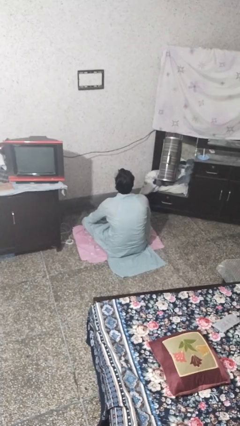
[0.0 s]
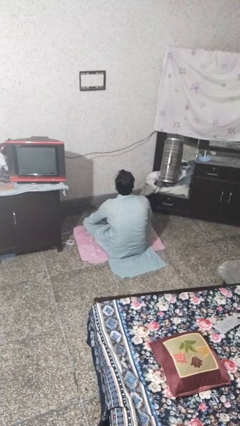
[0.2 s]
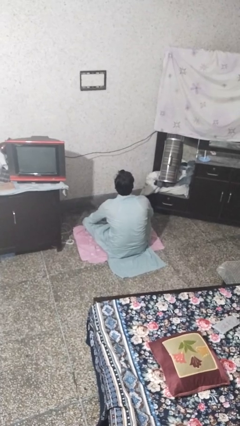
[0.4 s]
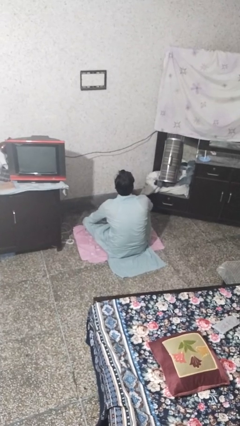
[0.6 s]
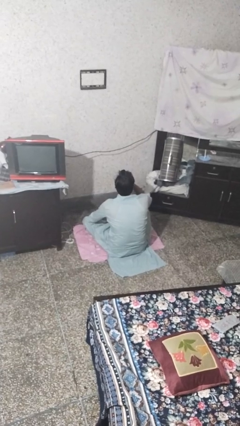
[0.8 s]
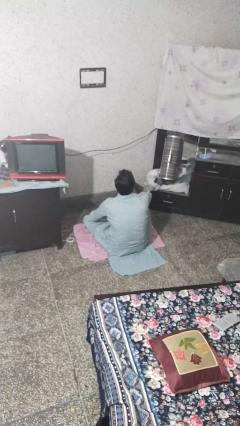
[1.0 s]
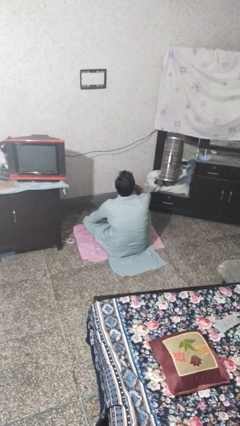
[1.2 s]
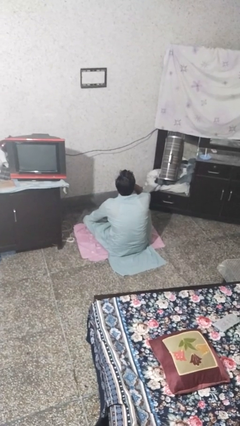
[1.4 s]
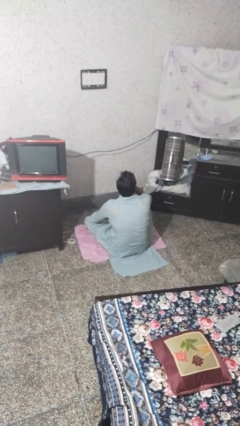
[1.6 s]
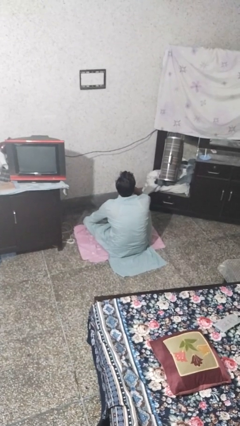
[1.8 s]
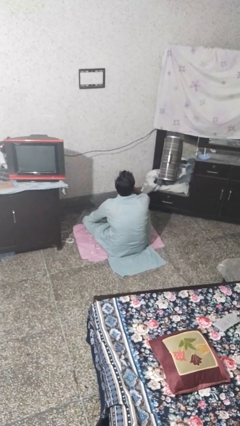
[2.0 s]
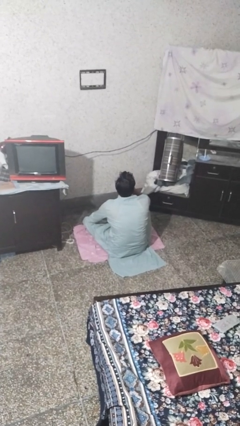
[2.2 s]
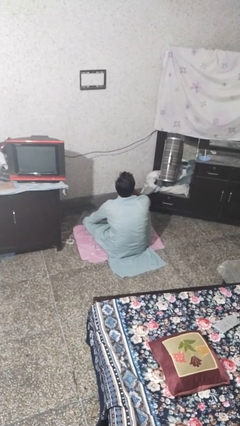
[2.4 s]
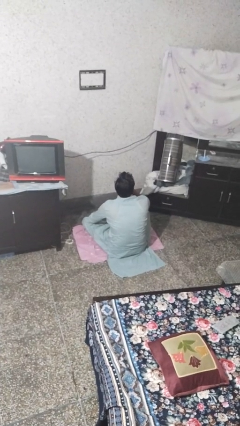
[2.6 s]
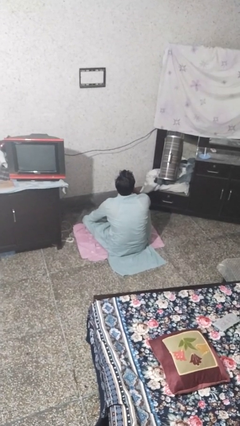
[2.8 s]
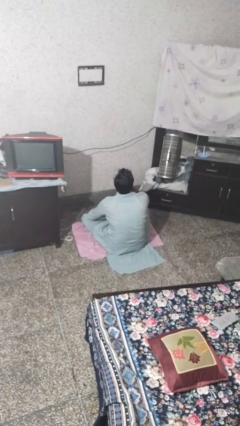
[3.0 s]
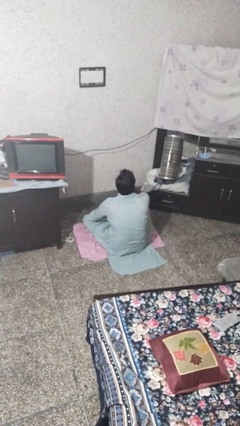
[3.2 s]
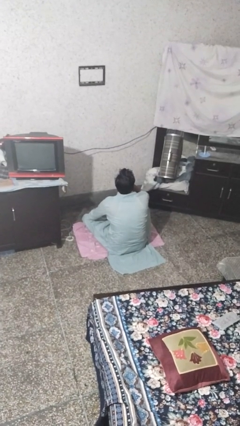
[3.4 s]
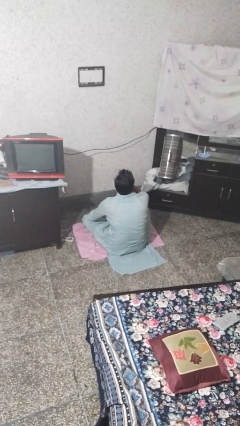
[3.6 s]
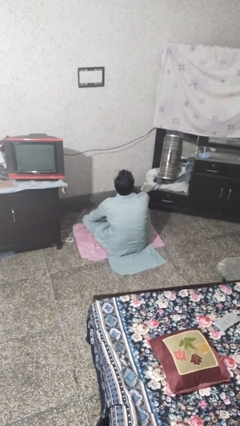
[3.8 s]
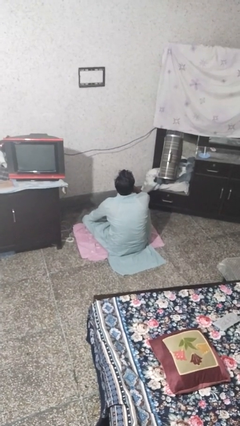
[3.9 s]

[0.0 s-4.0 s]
person licks fingers

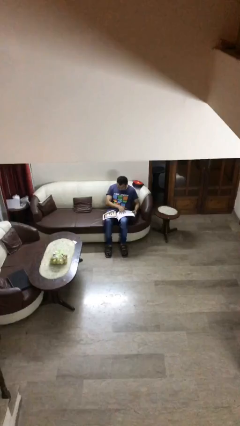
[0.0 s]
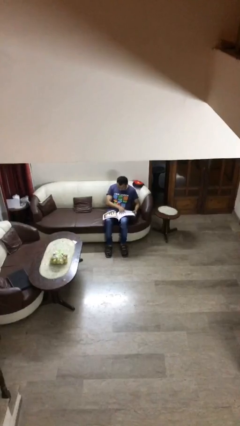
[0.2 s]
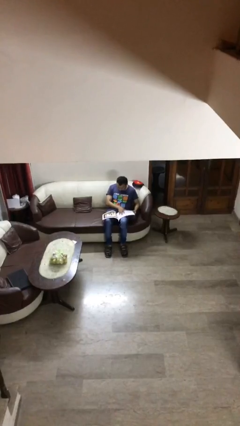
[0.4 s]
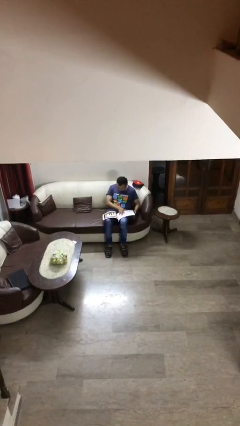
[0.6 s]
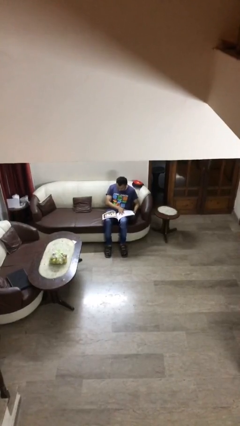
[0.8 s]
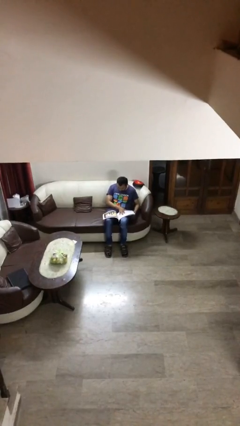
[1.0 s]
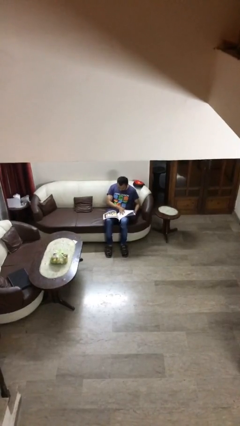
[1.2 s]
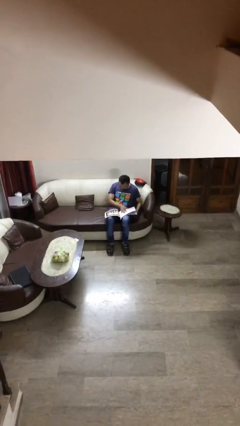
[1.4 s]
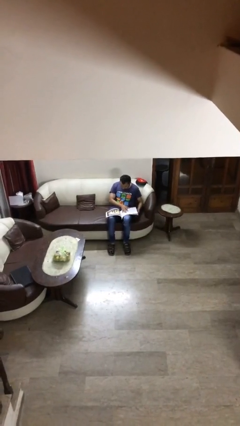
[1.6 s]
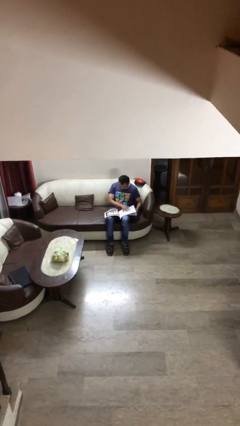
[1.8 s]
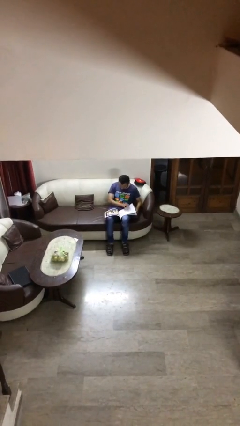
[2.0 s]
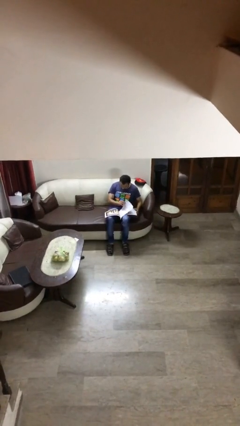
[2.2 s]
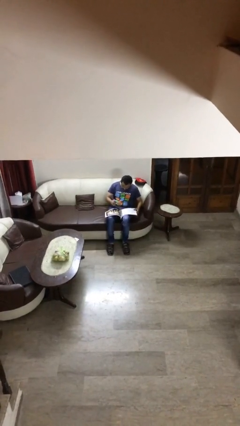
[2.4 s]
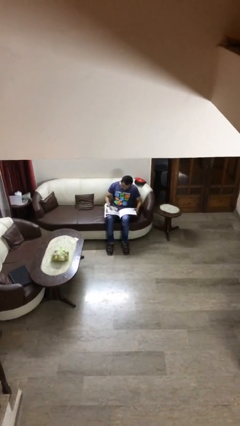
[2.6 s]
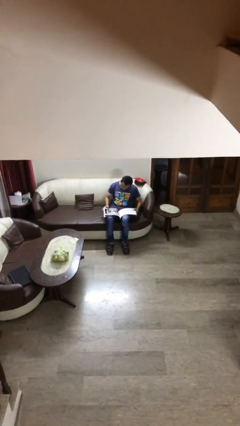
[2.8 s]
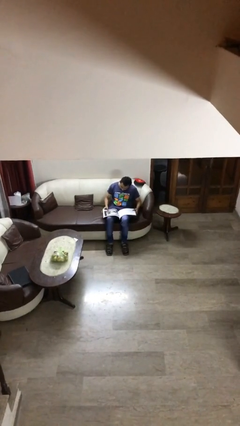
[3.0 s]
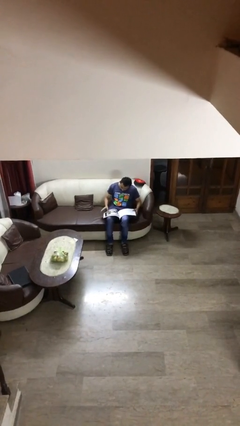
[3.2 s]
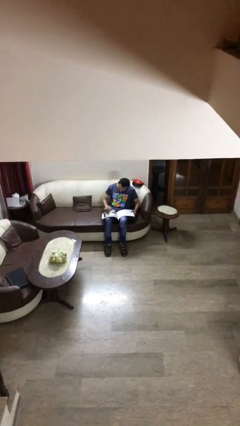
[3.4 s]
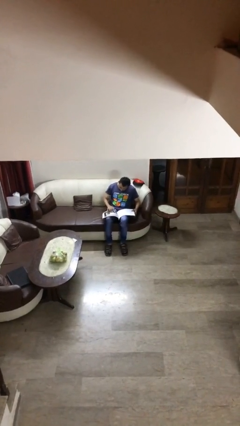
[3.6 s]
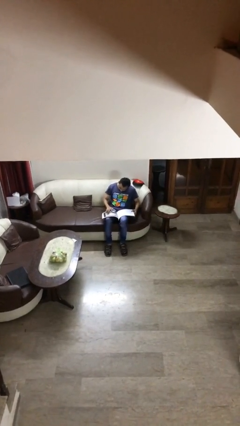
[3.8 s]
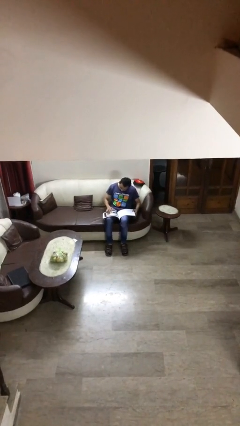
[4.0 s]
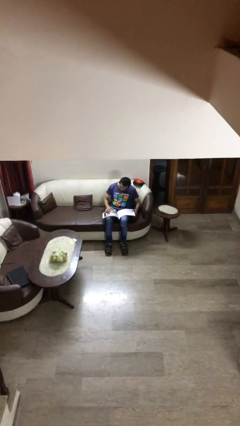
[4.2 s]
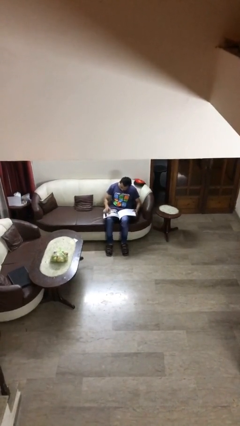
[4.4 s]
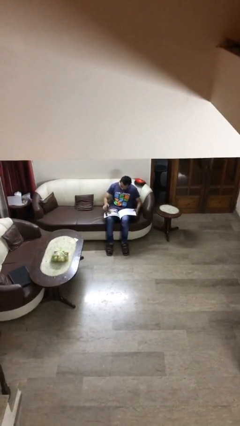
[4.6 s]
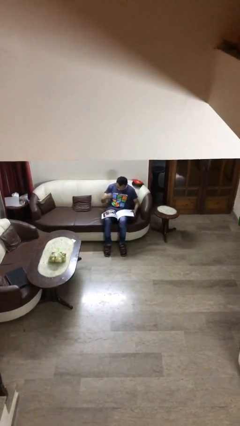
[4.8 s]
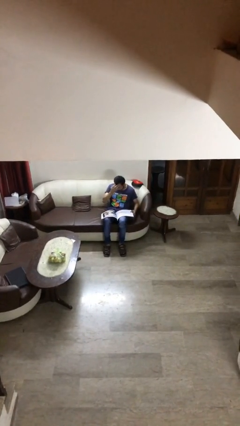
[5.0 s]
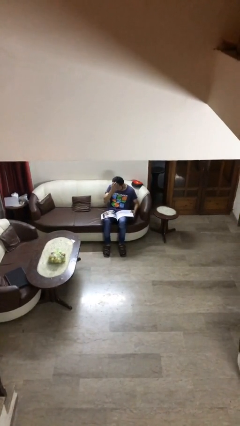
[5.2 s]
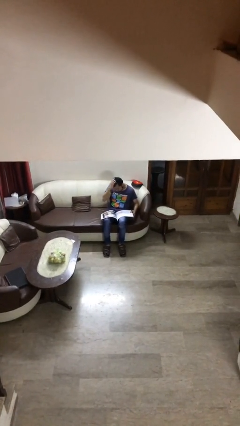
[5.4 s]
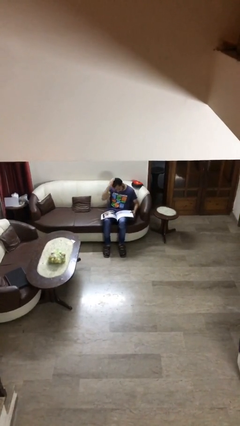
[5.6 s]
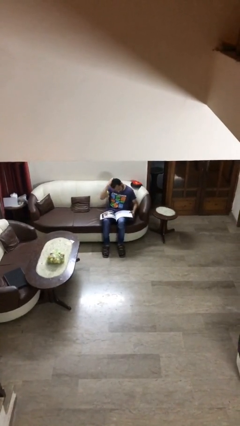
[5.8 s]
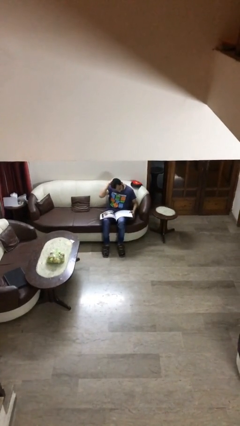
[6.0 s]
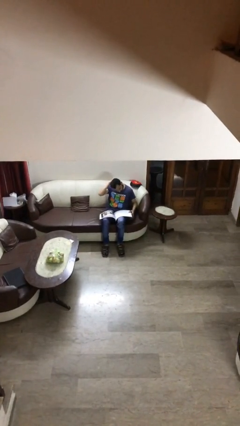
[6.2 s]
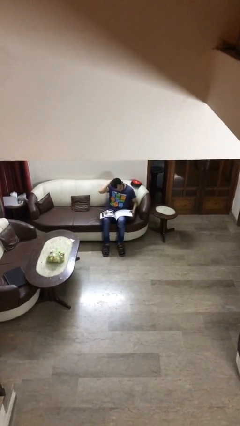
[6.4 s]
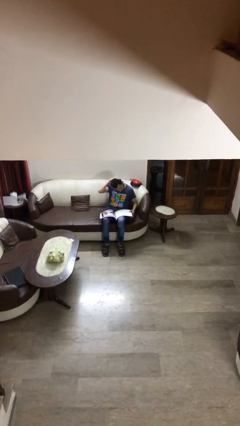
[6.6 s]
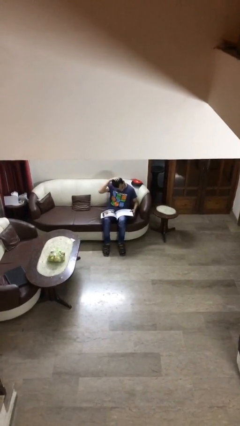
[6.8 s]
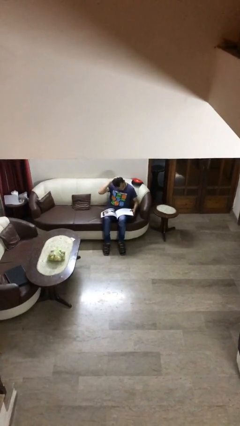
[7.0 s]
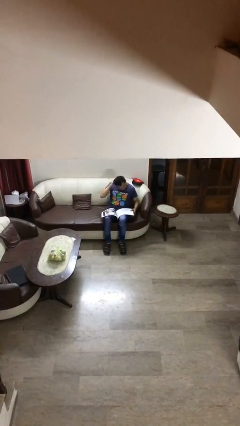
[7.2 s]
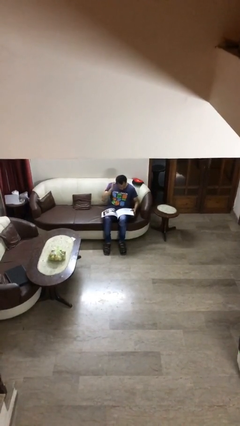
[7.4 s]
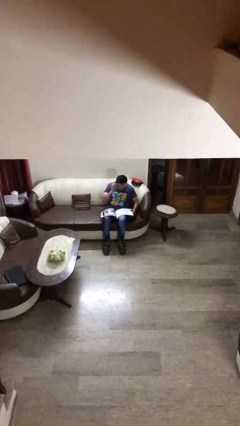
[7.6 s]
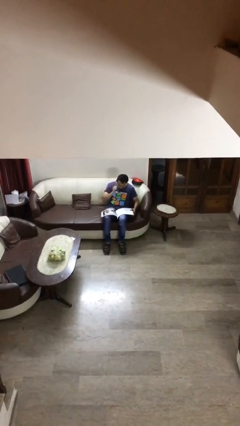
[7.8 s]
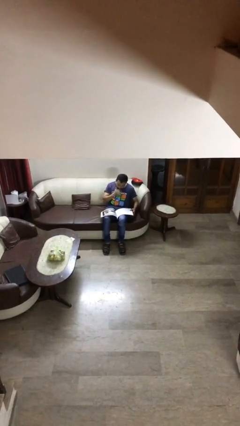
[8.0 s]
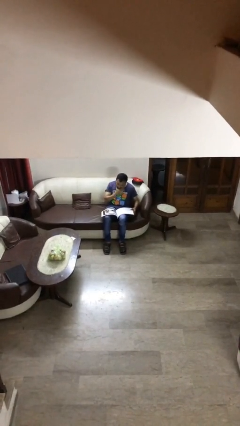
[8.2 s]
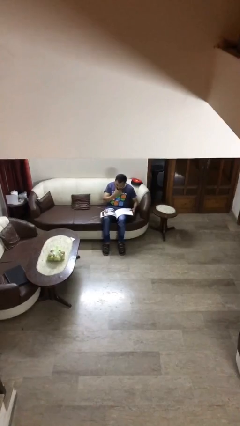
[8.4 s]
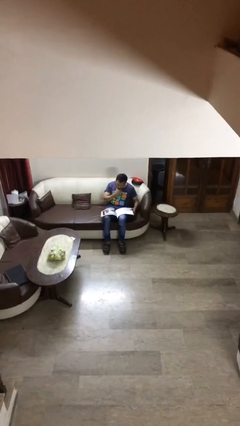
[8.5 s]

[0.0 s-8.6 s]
person reads document

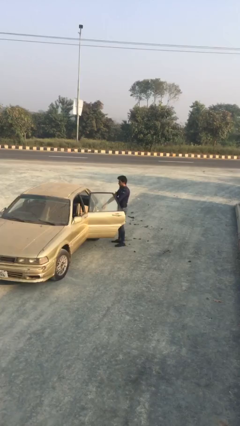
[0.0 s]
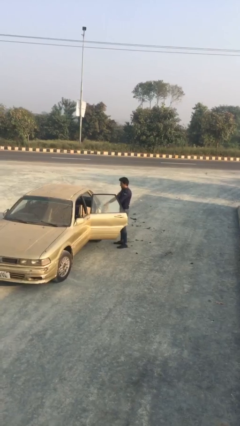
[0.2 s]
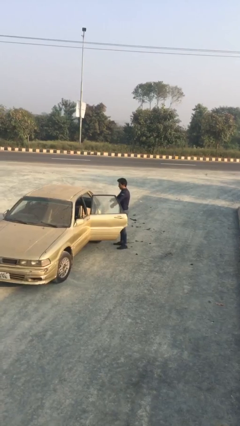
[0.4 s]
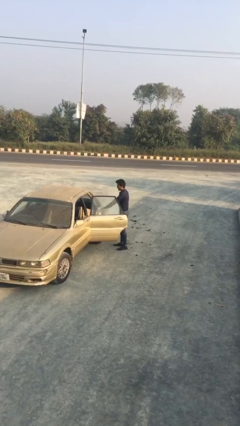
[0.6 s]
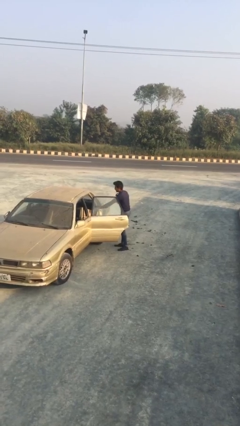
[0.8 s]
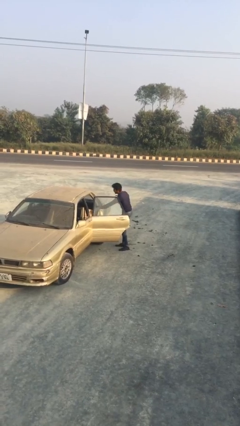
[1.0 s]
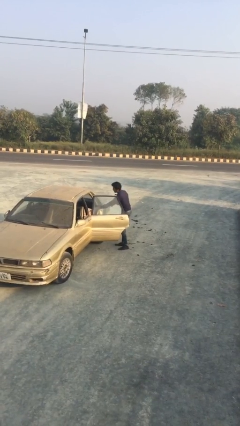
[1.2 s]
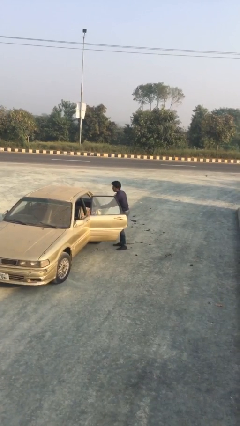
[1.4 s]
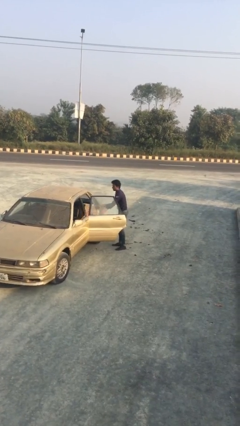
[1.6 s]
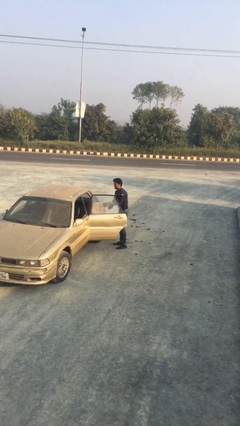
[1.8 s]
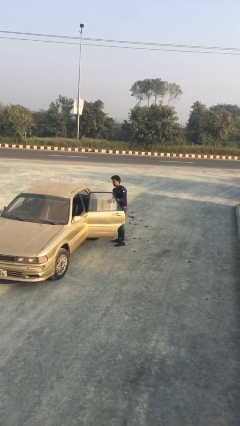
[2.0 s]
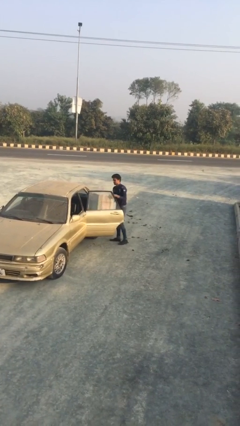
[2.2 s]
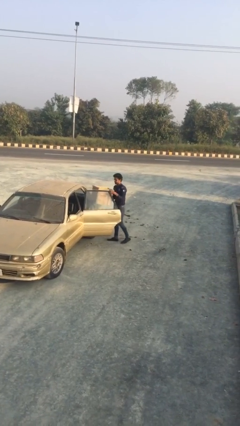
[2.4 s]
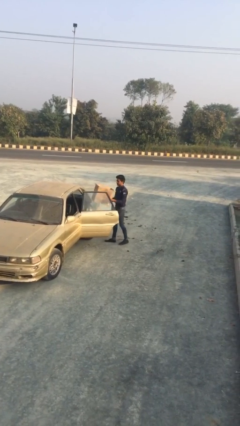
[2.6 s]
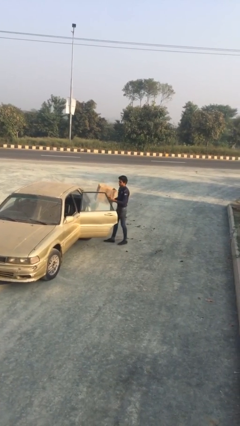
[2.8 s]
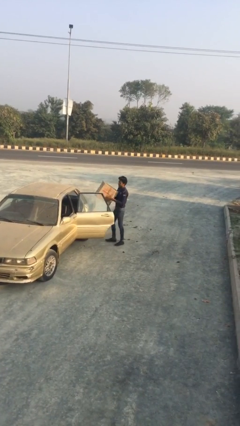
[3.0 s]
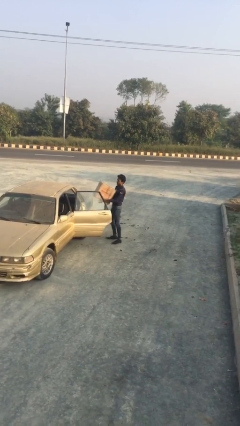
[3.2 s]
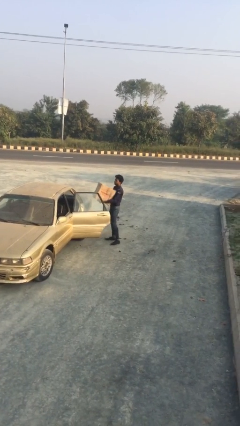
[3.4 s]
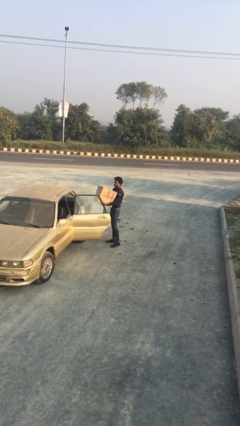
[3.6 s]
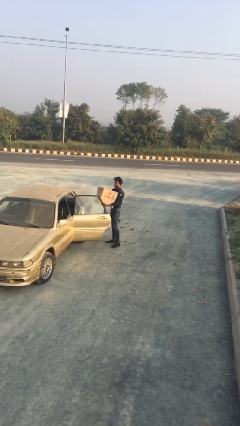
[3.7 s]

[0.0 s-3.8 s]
person unloads car

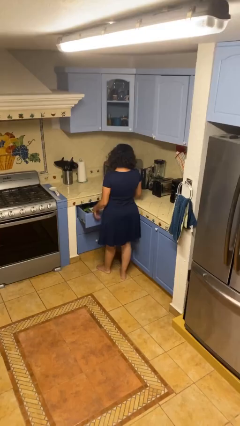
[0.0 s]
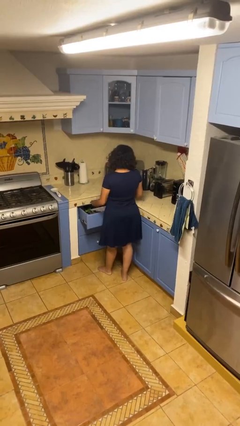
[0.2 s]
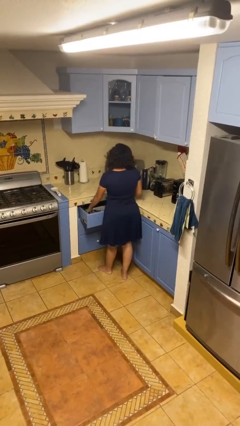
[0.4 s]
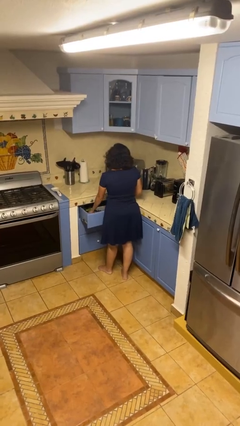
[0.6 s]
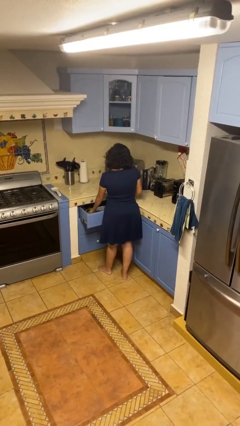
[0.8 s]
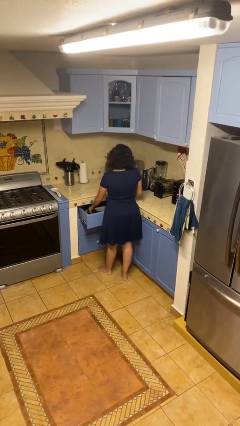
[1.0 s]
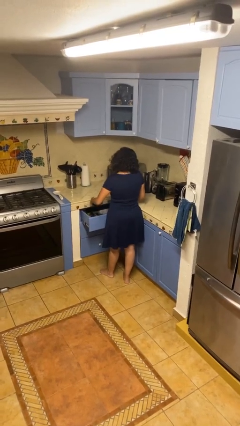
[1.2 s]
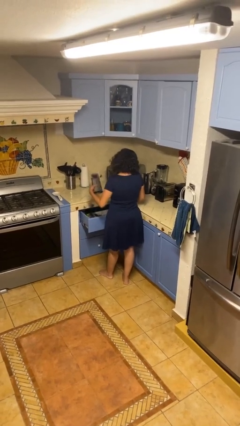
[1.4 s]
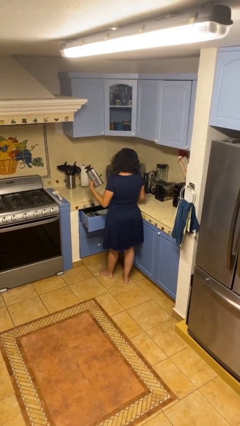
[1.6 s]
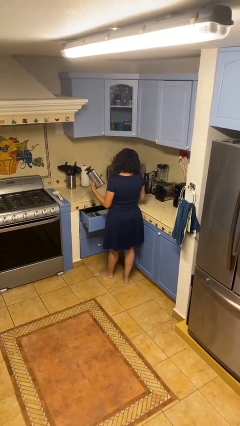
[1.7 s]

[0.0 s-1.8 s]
person takes object from kitchen drawer
